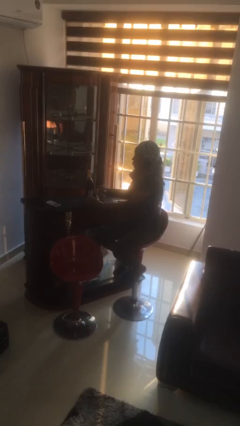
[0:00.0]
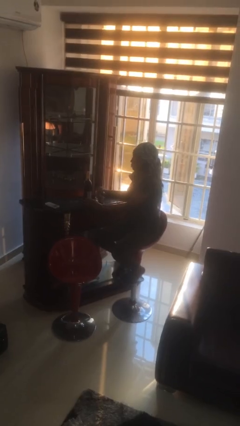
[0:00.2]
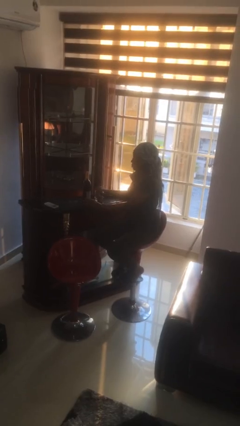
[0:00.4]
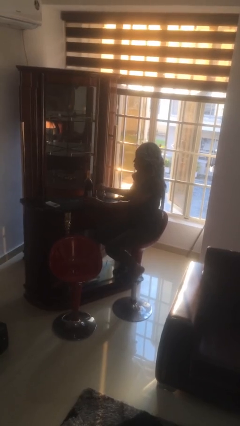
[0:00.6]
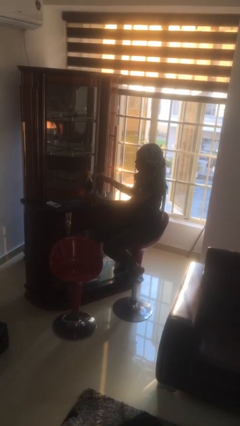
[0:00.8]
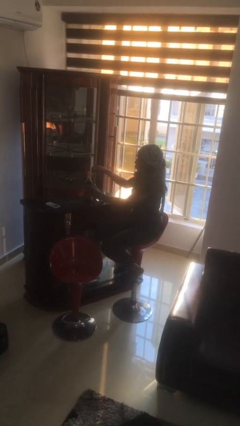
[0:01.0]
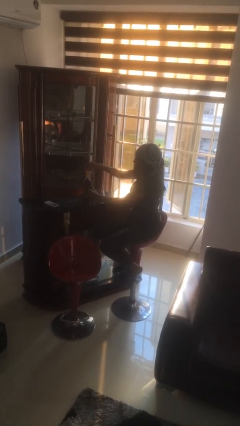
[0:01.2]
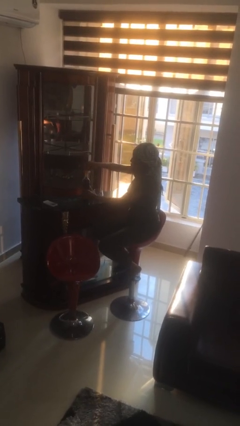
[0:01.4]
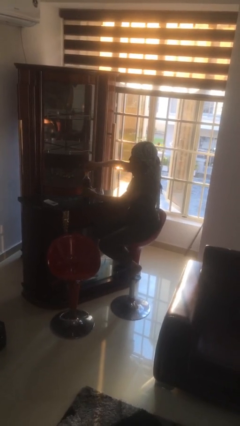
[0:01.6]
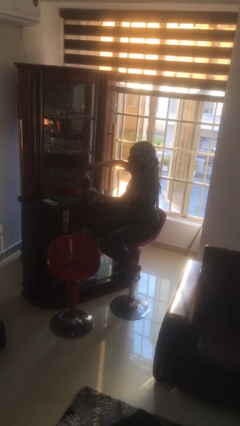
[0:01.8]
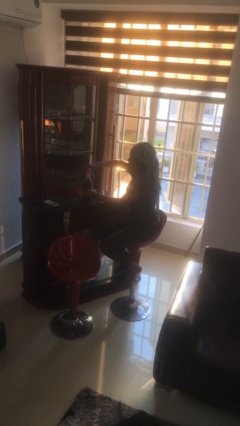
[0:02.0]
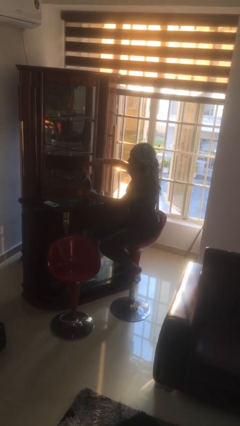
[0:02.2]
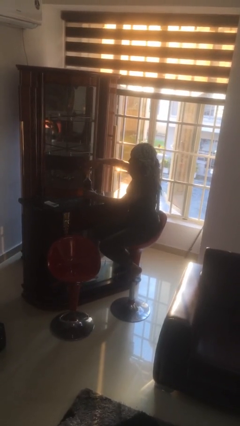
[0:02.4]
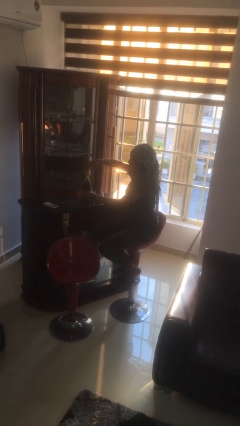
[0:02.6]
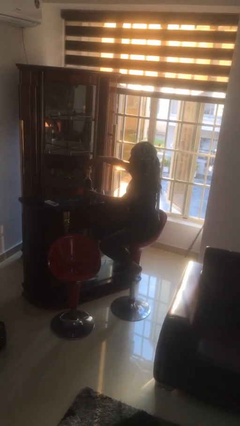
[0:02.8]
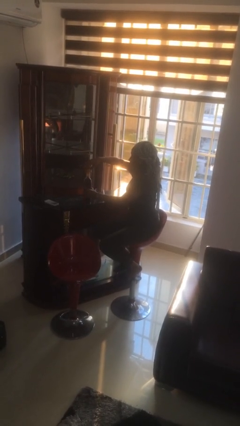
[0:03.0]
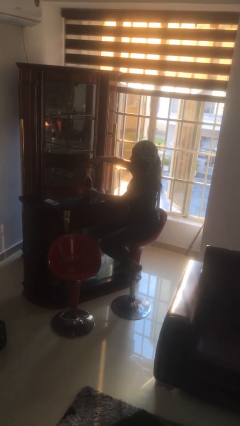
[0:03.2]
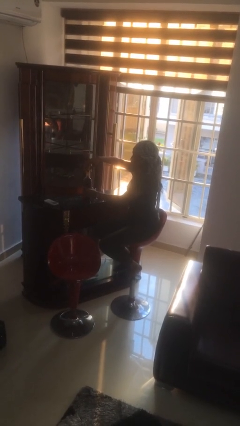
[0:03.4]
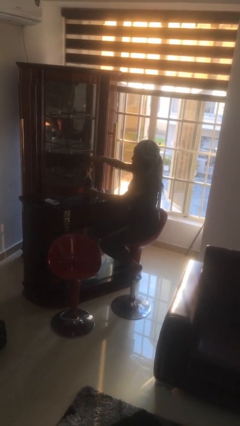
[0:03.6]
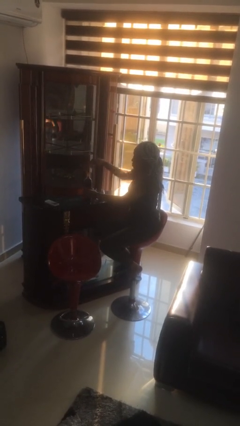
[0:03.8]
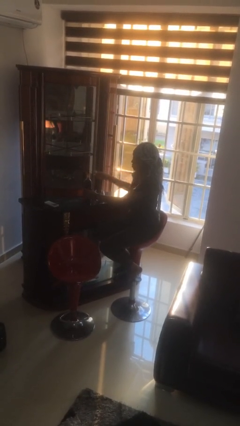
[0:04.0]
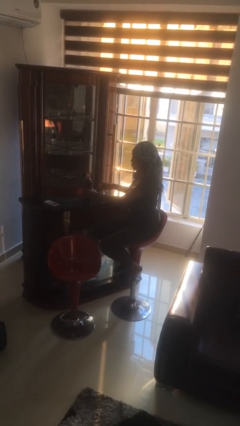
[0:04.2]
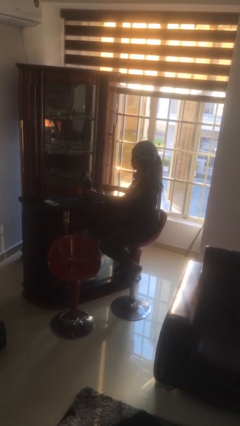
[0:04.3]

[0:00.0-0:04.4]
person unscrews lid from bottle

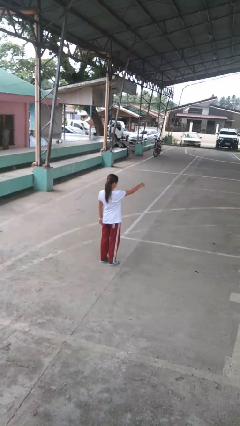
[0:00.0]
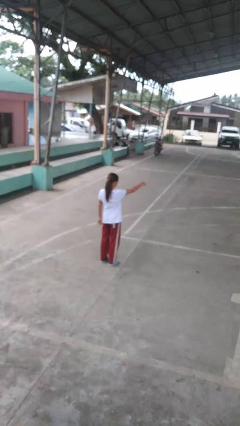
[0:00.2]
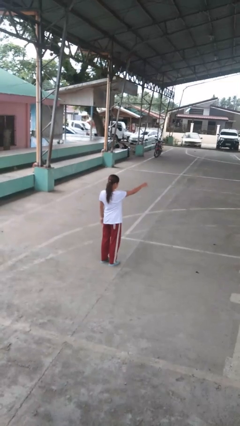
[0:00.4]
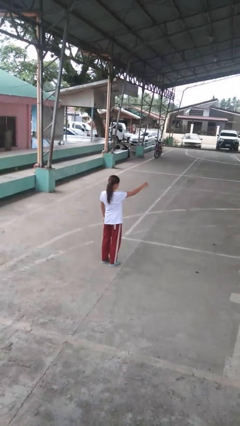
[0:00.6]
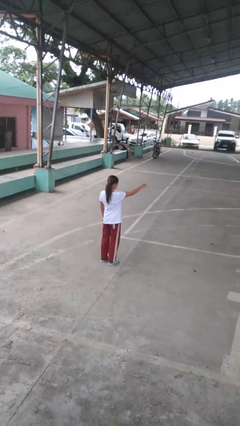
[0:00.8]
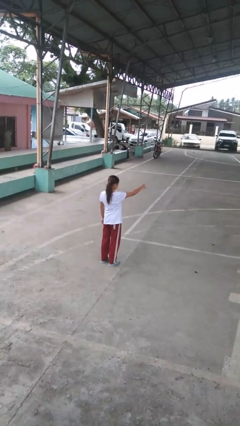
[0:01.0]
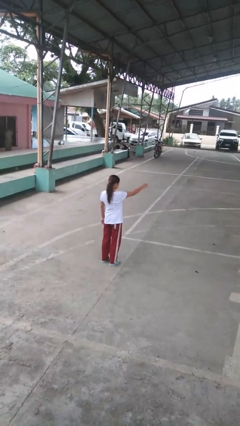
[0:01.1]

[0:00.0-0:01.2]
person gestures come here

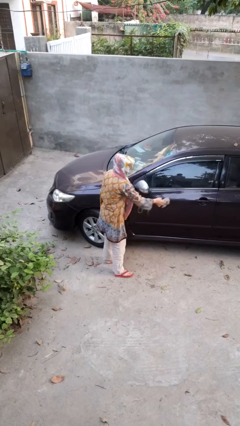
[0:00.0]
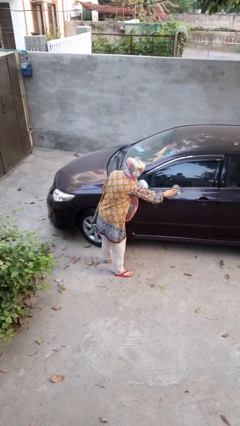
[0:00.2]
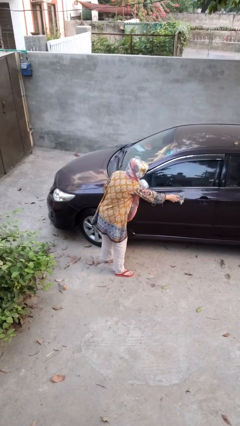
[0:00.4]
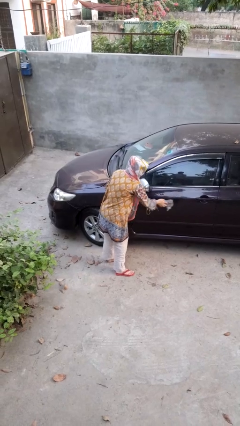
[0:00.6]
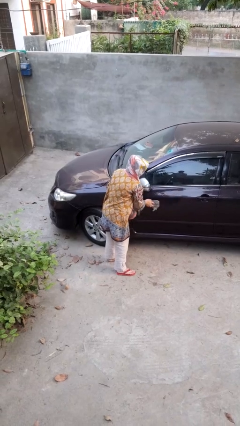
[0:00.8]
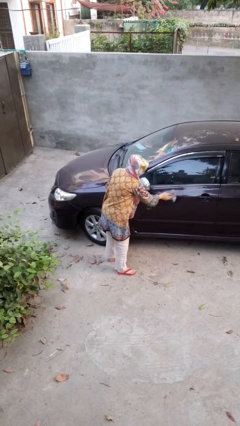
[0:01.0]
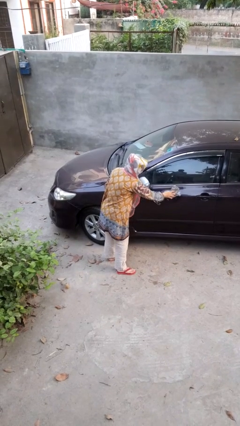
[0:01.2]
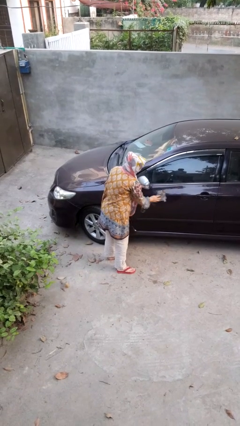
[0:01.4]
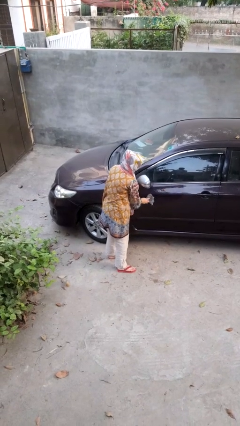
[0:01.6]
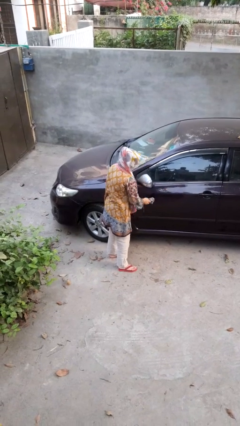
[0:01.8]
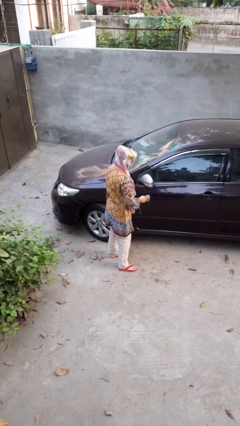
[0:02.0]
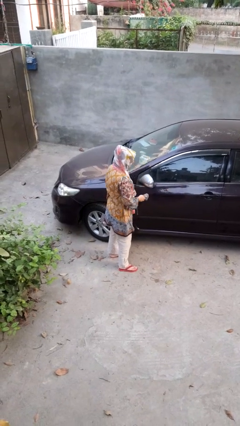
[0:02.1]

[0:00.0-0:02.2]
person polishes car with rag

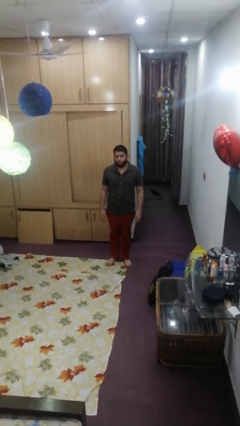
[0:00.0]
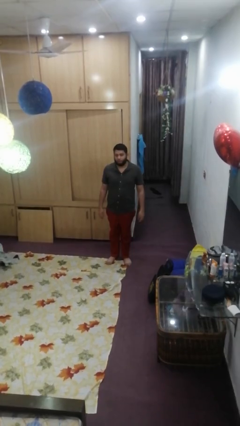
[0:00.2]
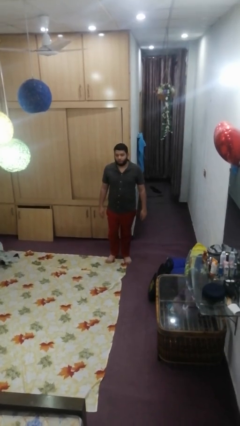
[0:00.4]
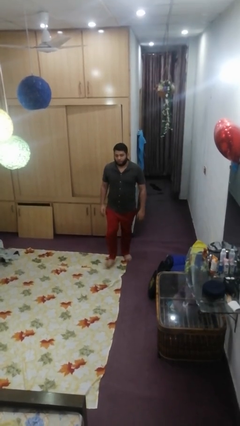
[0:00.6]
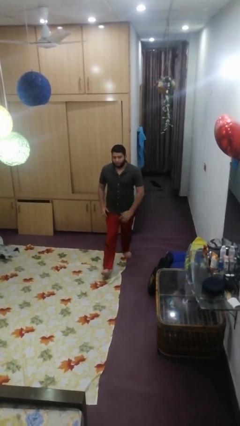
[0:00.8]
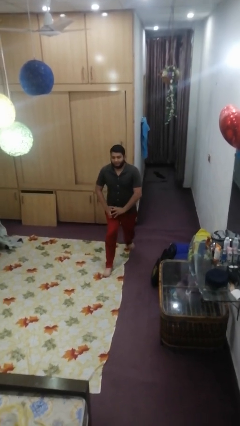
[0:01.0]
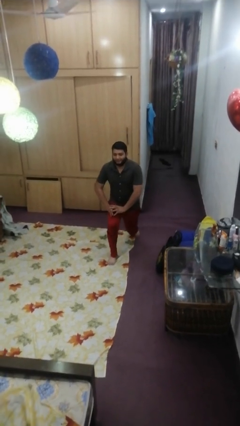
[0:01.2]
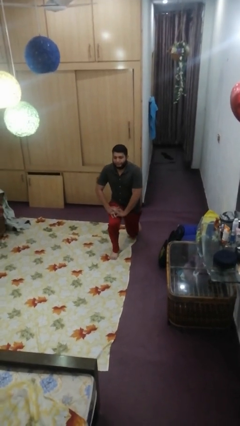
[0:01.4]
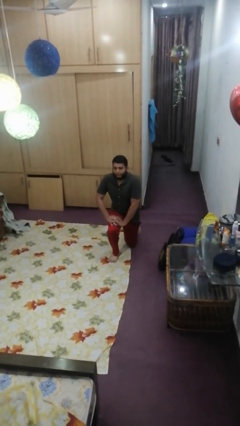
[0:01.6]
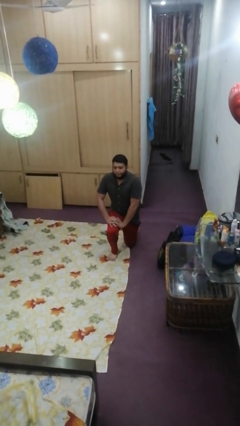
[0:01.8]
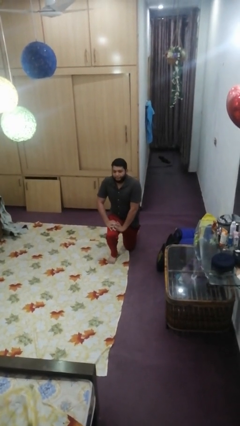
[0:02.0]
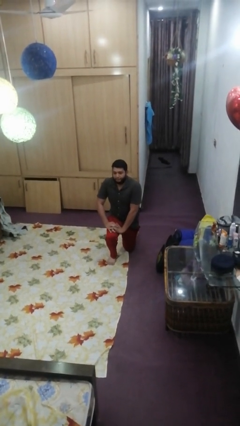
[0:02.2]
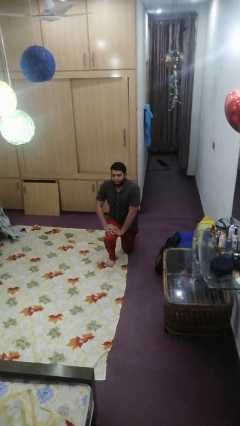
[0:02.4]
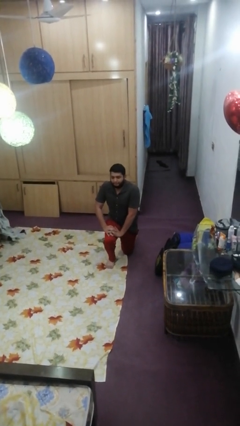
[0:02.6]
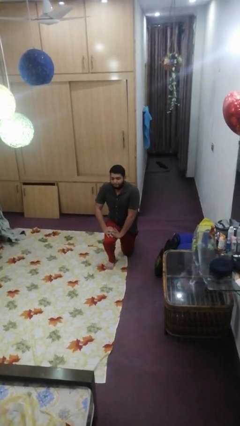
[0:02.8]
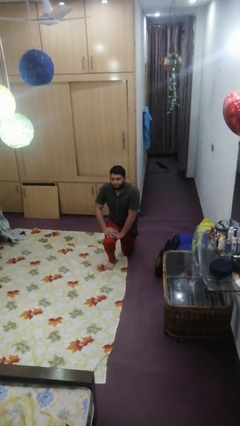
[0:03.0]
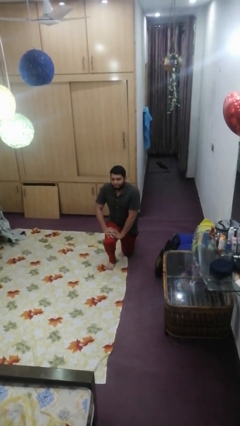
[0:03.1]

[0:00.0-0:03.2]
person kneels

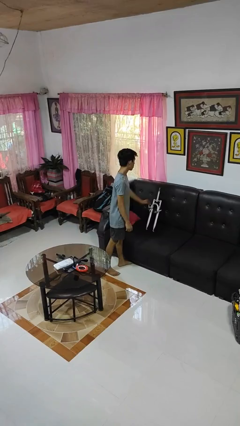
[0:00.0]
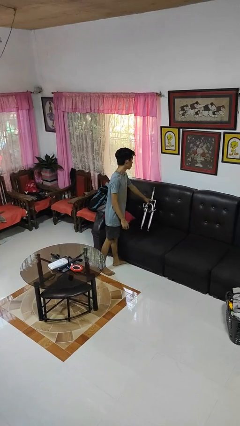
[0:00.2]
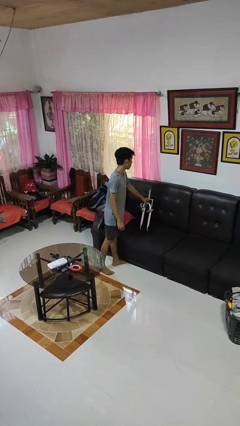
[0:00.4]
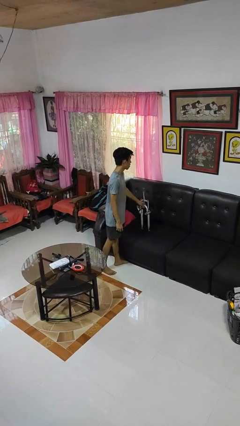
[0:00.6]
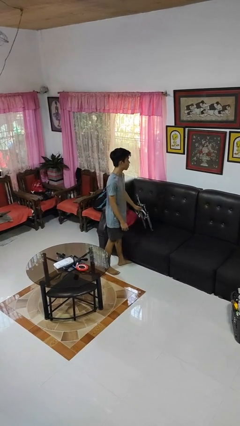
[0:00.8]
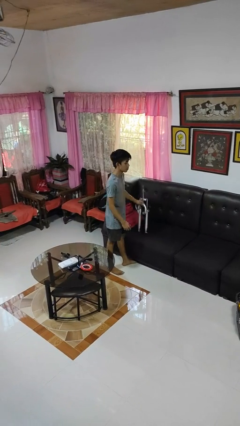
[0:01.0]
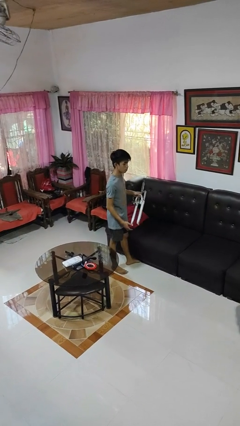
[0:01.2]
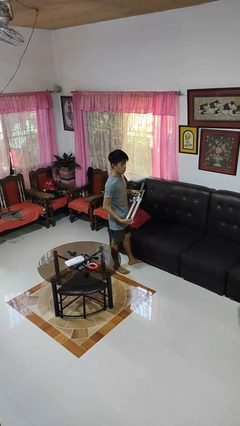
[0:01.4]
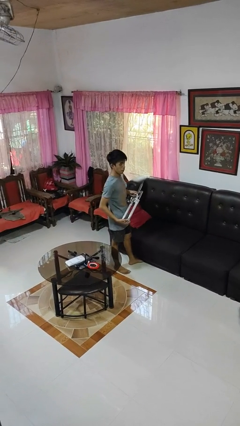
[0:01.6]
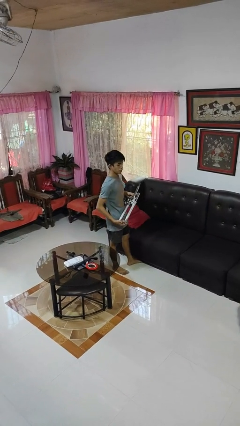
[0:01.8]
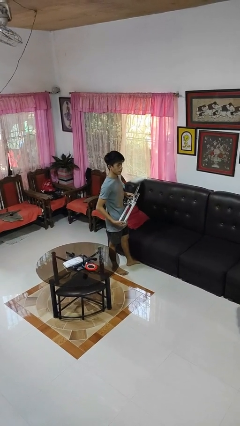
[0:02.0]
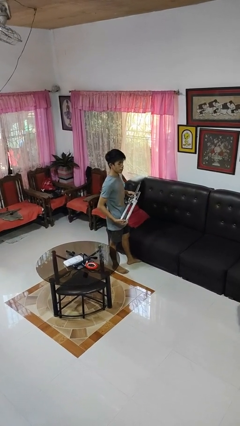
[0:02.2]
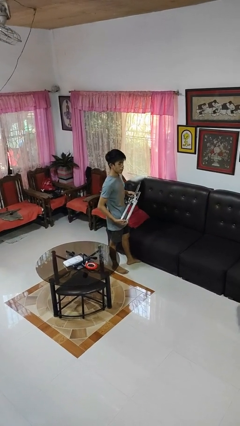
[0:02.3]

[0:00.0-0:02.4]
person picks up object from couch

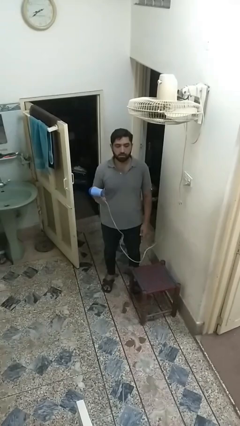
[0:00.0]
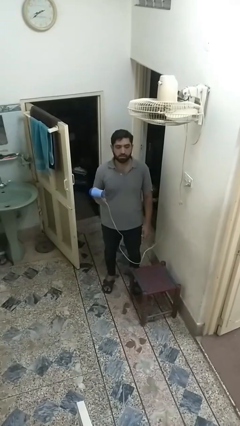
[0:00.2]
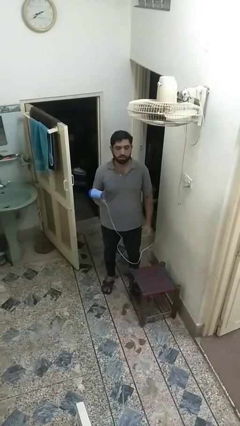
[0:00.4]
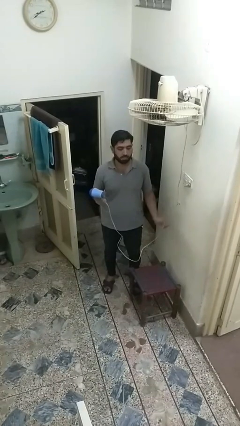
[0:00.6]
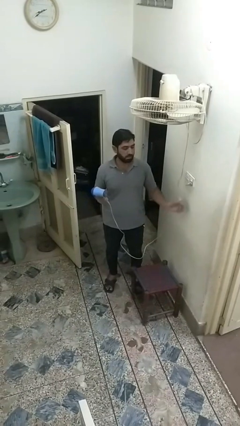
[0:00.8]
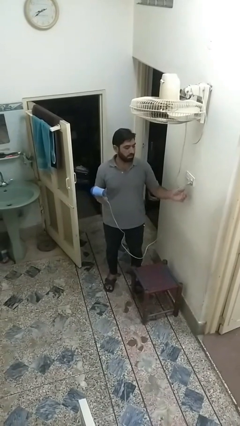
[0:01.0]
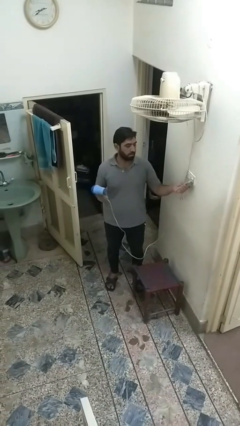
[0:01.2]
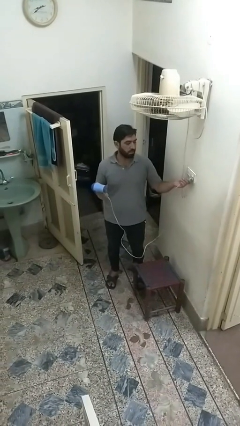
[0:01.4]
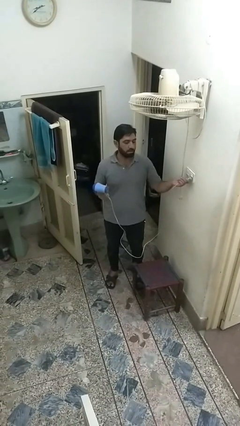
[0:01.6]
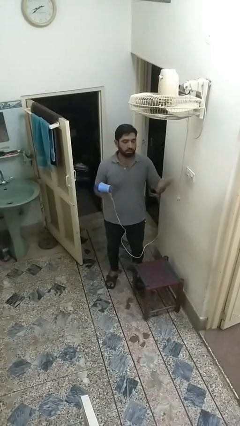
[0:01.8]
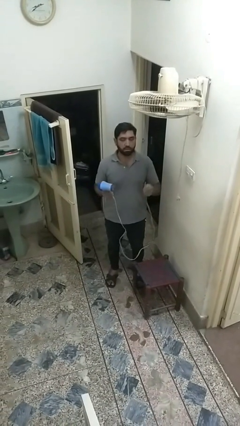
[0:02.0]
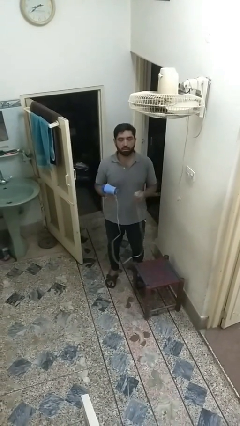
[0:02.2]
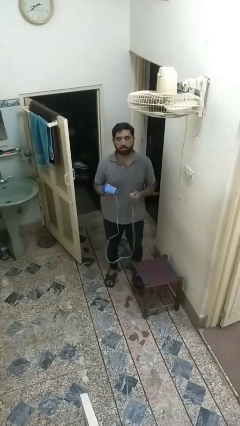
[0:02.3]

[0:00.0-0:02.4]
person unplugs from electrical socket

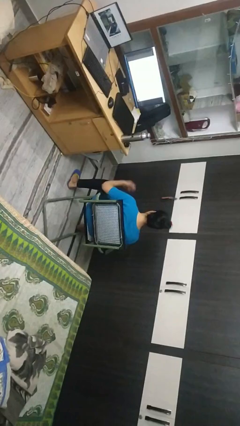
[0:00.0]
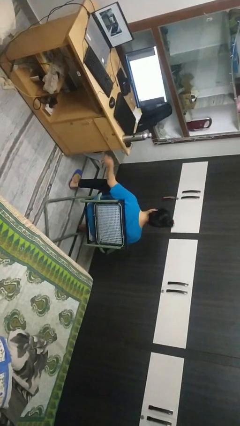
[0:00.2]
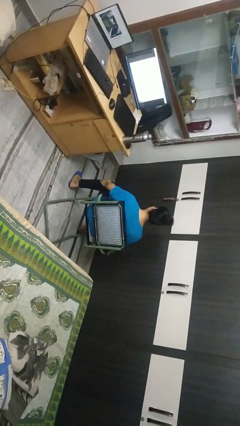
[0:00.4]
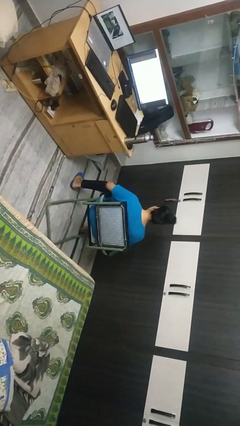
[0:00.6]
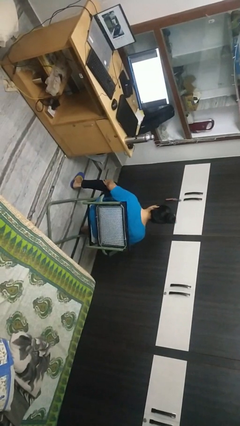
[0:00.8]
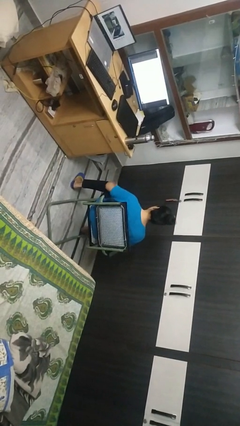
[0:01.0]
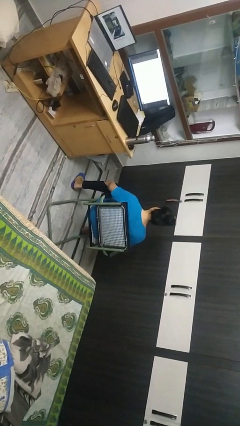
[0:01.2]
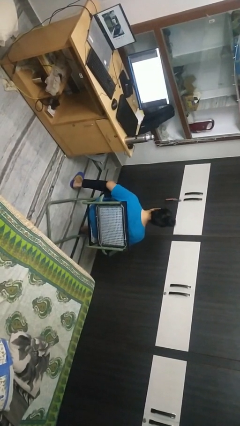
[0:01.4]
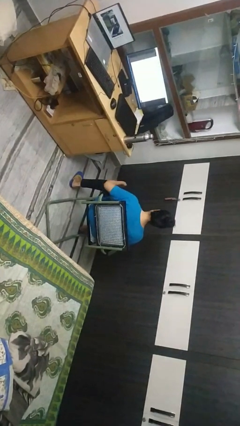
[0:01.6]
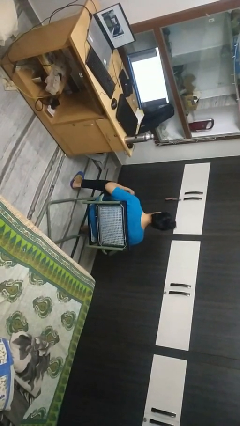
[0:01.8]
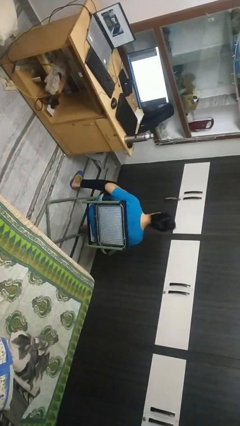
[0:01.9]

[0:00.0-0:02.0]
person swats bug
